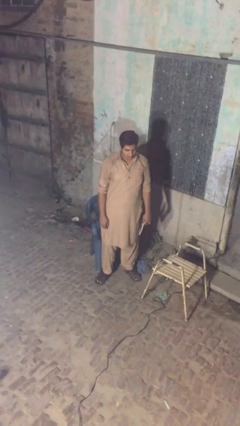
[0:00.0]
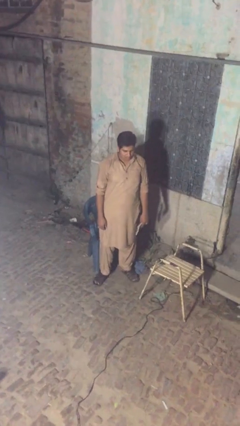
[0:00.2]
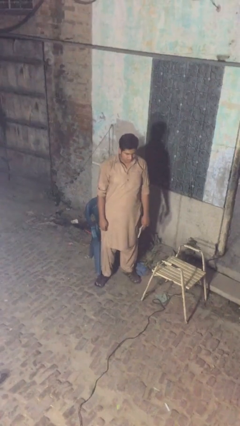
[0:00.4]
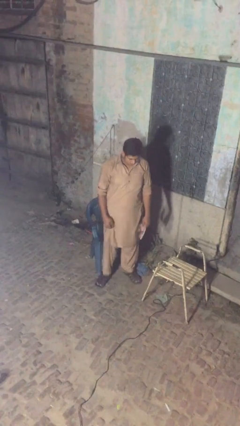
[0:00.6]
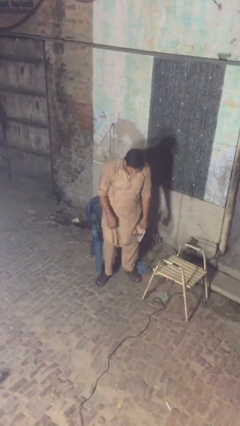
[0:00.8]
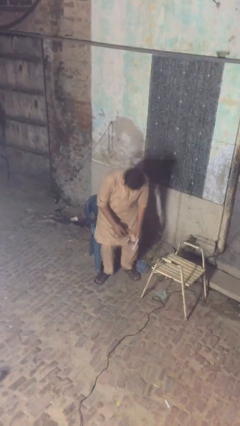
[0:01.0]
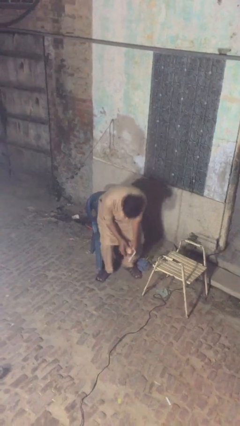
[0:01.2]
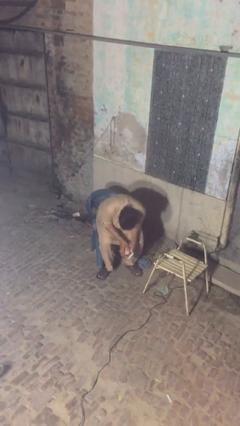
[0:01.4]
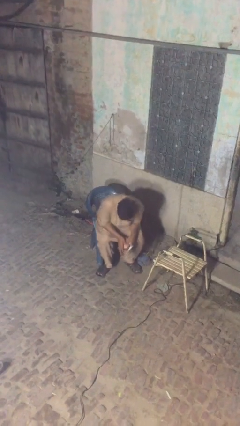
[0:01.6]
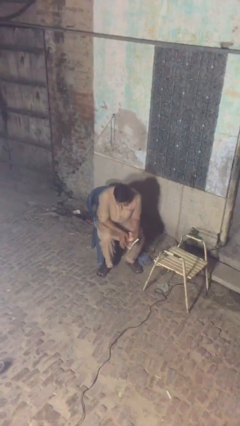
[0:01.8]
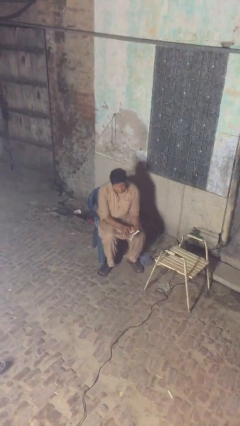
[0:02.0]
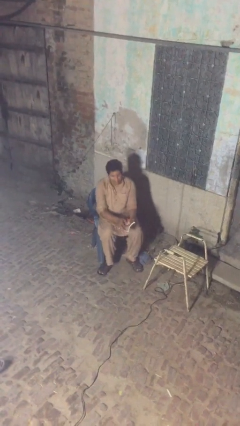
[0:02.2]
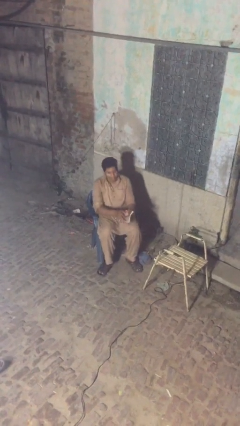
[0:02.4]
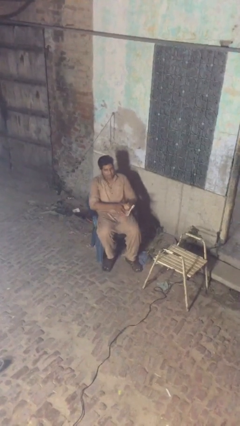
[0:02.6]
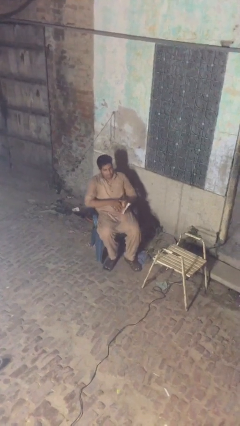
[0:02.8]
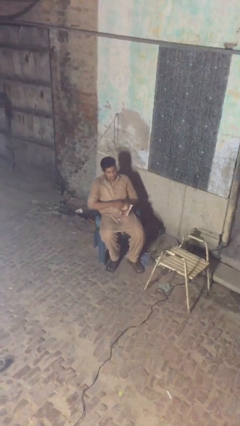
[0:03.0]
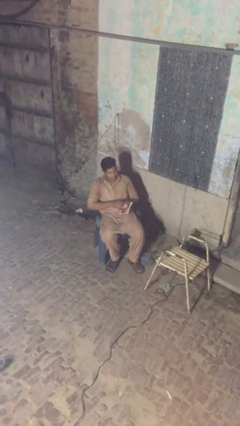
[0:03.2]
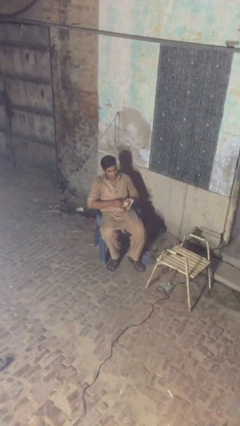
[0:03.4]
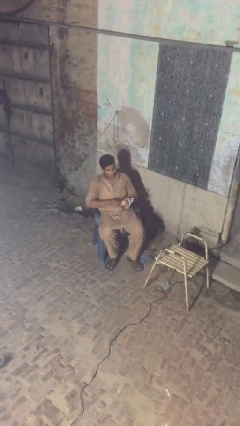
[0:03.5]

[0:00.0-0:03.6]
person sits down

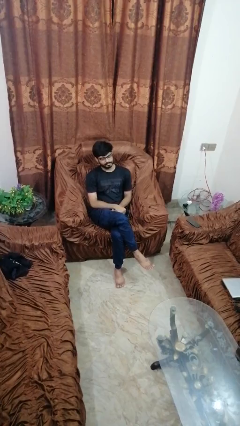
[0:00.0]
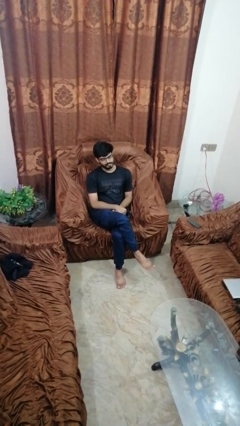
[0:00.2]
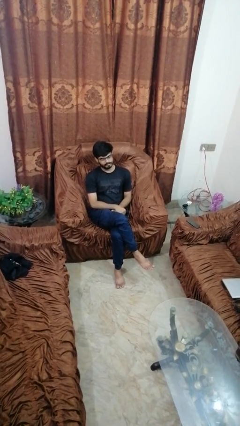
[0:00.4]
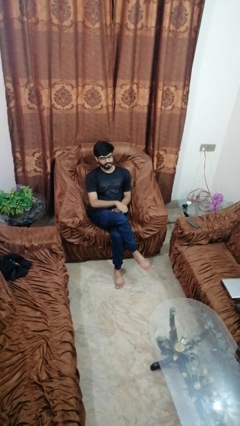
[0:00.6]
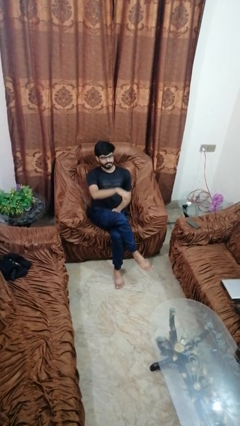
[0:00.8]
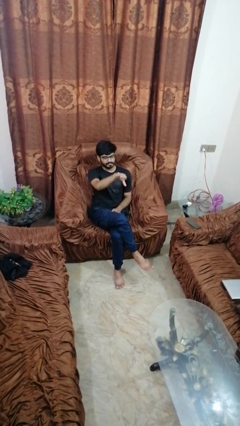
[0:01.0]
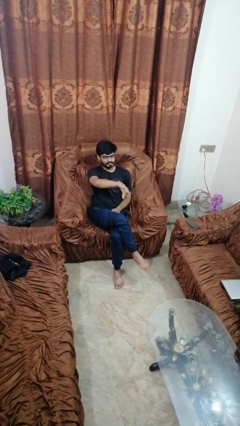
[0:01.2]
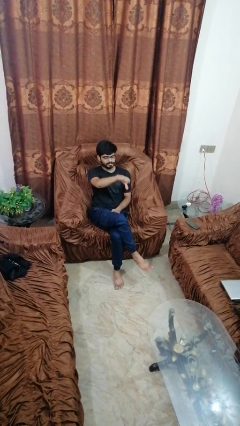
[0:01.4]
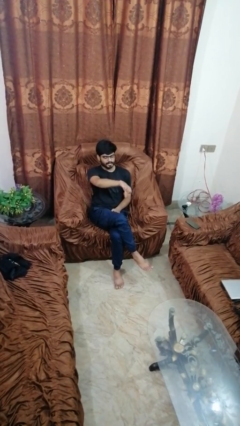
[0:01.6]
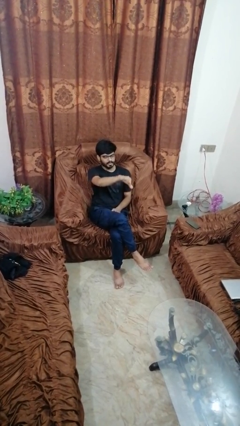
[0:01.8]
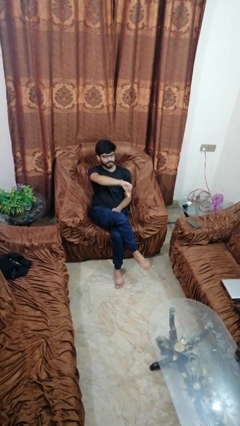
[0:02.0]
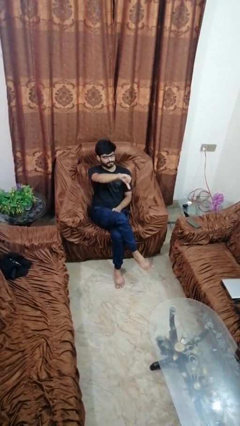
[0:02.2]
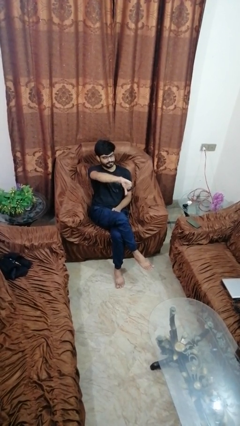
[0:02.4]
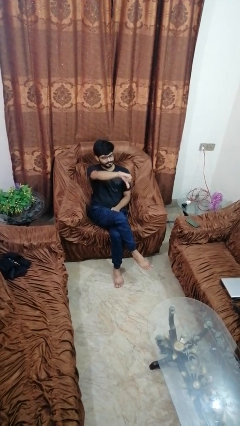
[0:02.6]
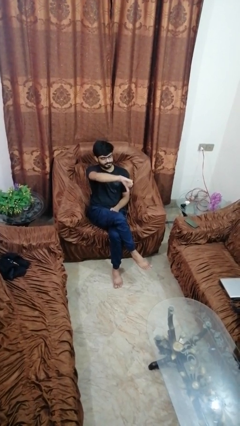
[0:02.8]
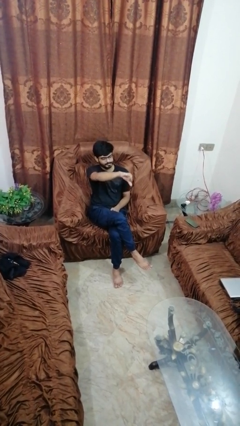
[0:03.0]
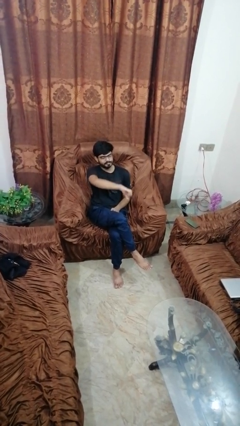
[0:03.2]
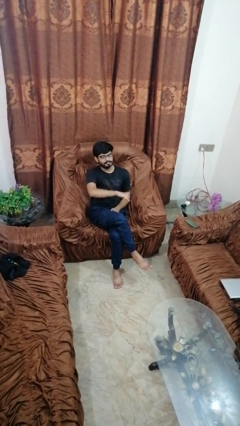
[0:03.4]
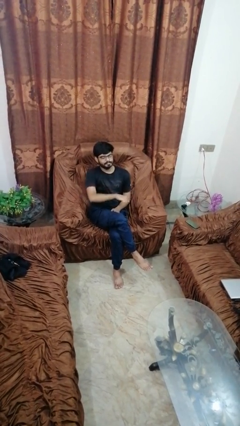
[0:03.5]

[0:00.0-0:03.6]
person gestures thumbs down

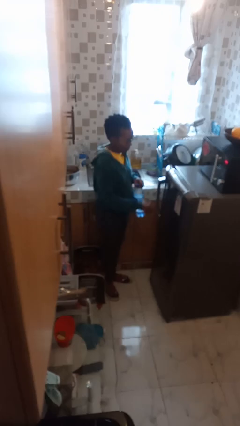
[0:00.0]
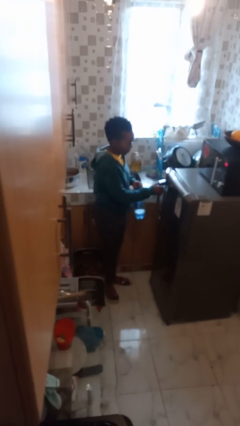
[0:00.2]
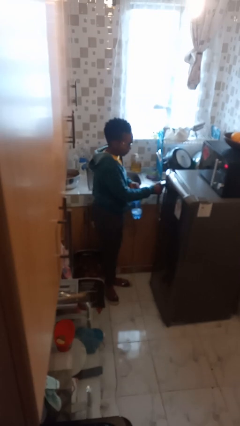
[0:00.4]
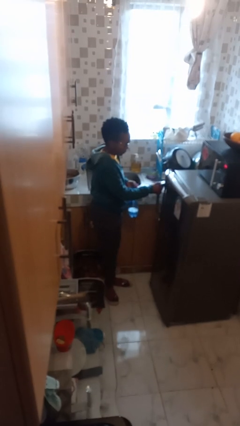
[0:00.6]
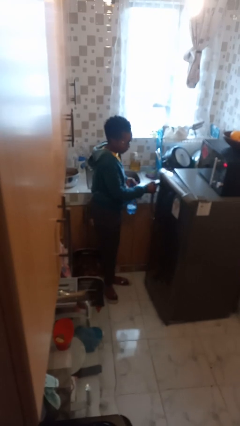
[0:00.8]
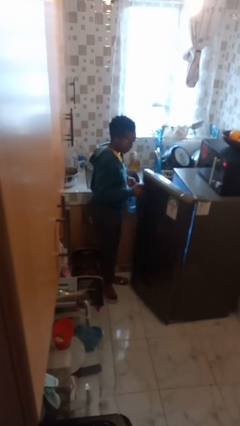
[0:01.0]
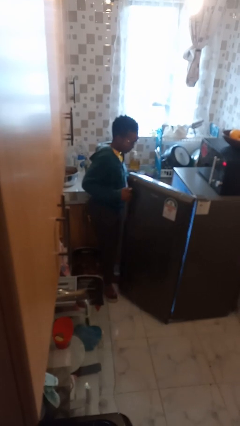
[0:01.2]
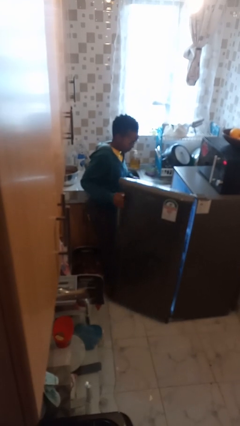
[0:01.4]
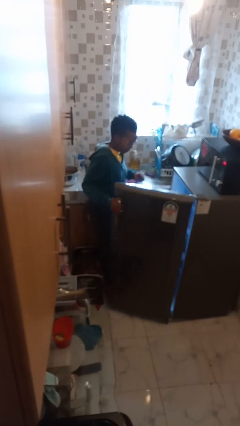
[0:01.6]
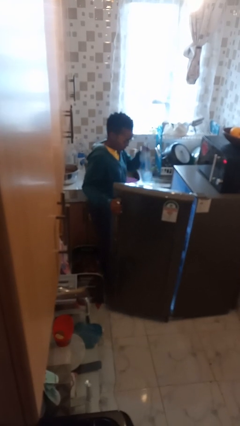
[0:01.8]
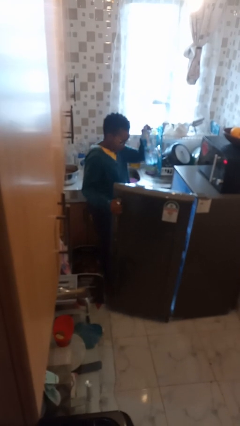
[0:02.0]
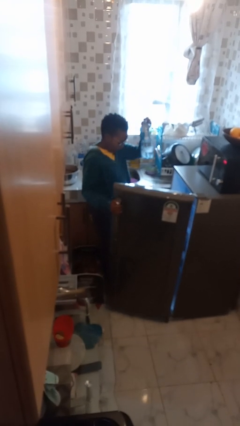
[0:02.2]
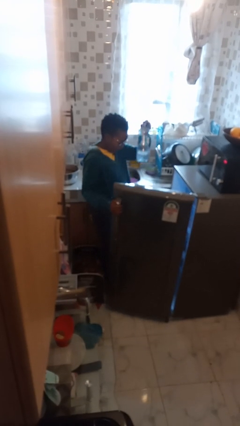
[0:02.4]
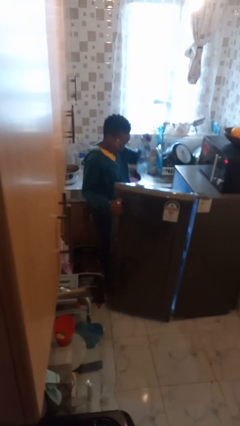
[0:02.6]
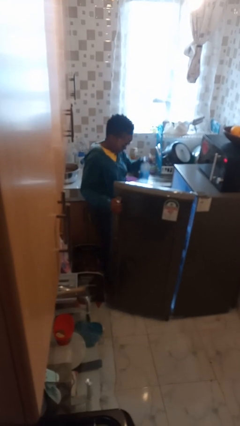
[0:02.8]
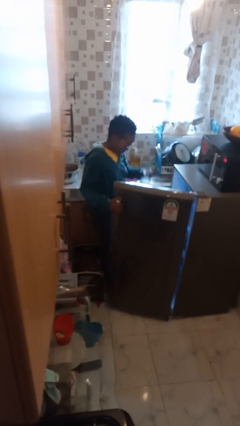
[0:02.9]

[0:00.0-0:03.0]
person opens refrigerator

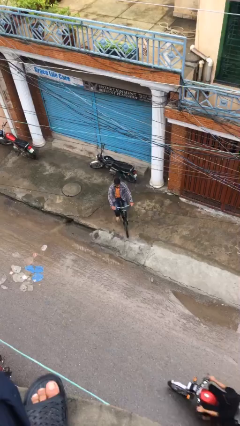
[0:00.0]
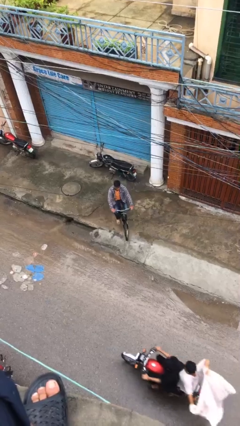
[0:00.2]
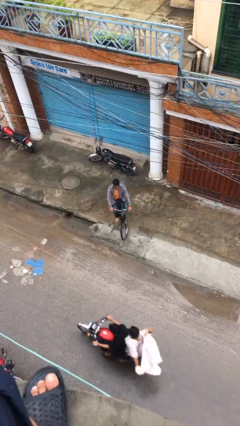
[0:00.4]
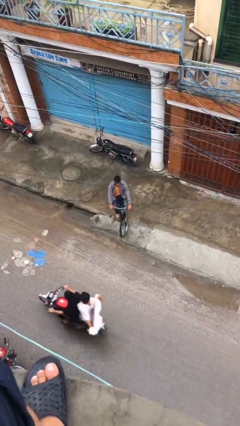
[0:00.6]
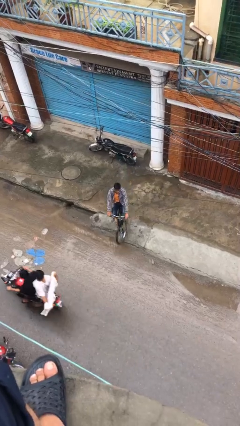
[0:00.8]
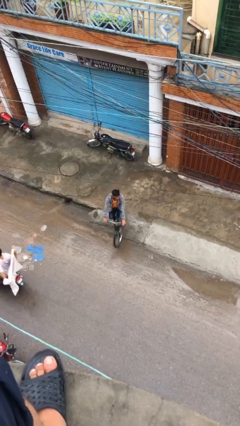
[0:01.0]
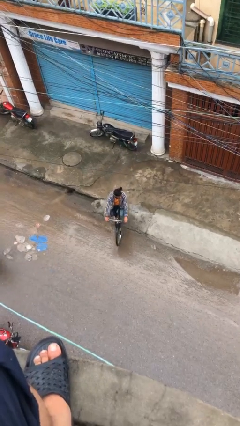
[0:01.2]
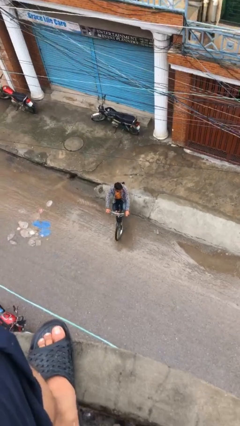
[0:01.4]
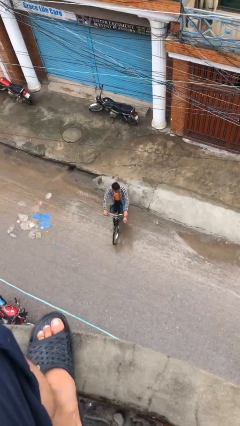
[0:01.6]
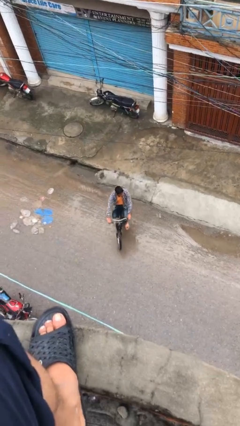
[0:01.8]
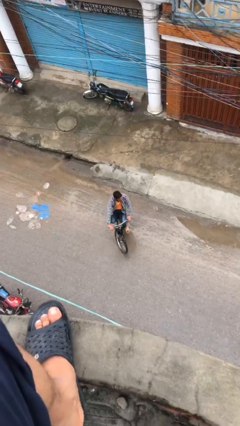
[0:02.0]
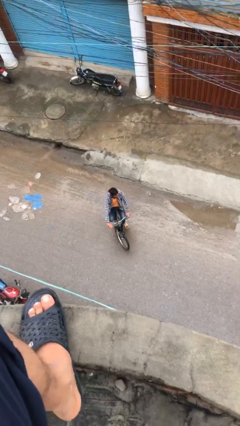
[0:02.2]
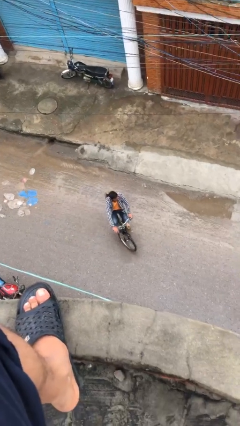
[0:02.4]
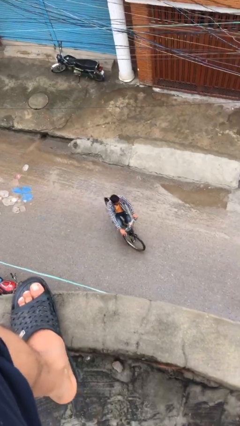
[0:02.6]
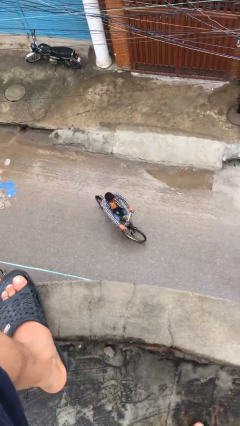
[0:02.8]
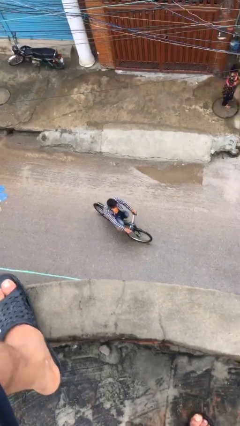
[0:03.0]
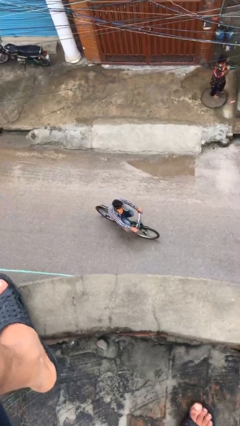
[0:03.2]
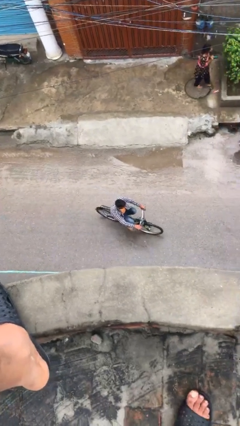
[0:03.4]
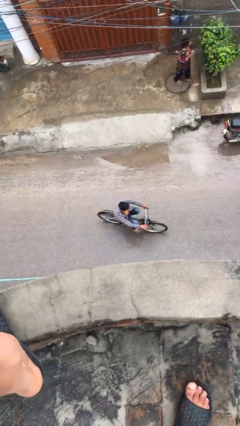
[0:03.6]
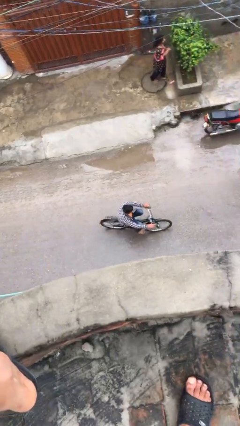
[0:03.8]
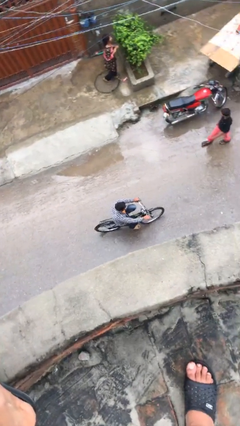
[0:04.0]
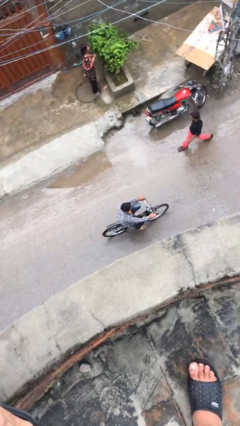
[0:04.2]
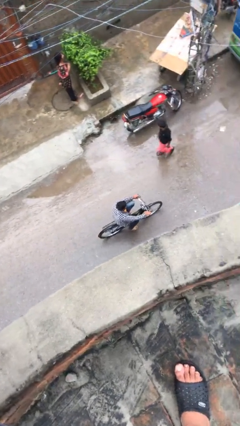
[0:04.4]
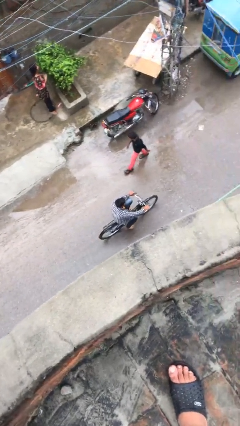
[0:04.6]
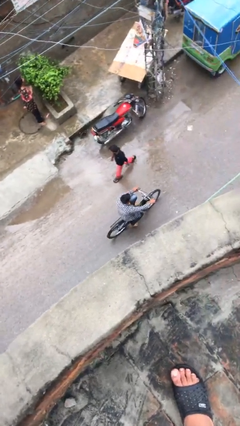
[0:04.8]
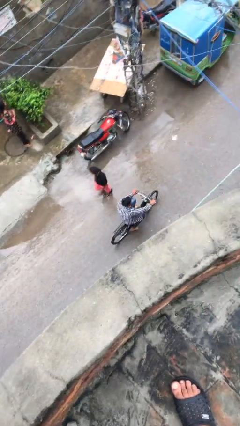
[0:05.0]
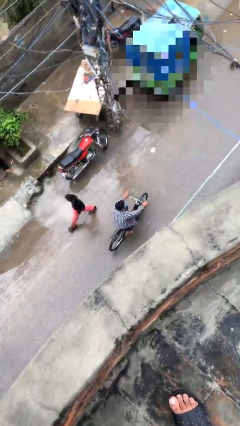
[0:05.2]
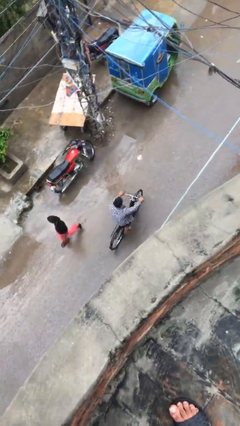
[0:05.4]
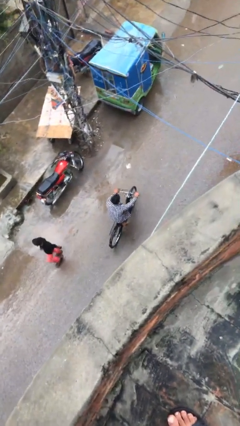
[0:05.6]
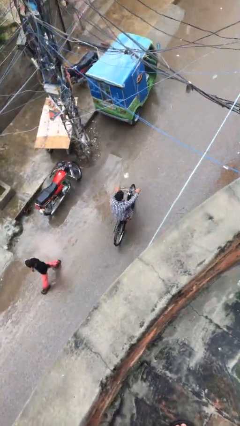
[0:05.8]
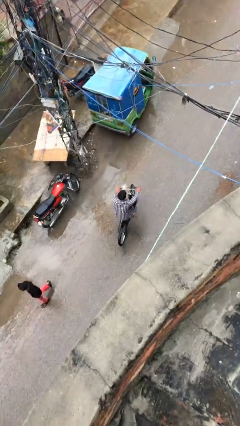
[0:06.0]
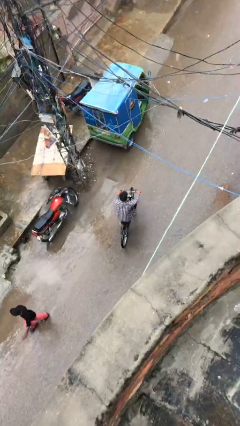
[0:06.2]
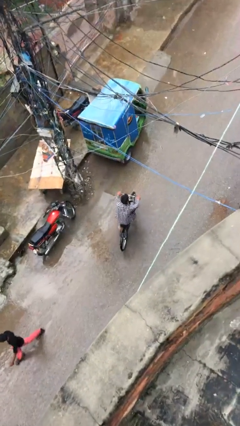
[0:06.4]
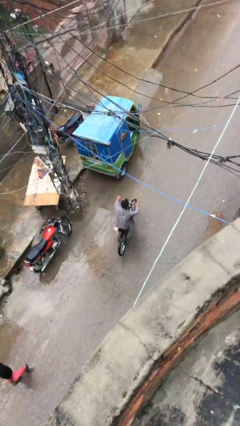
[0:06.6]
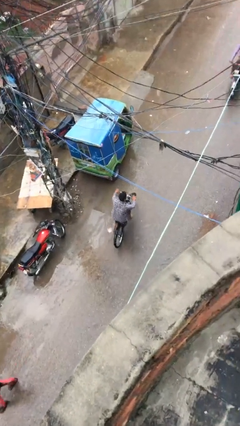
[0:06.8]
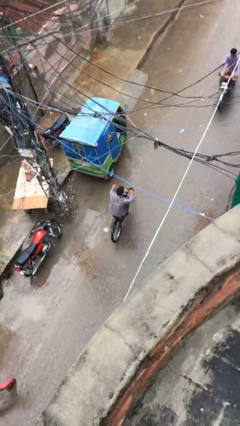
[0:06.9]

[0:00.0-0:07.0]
person rides bicycle

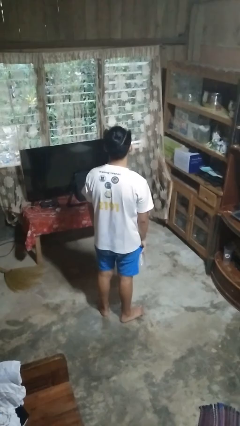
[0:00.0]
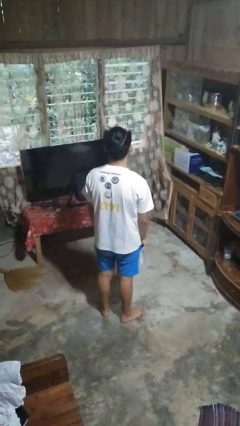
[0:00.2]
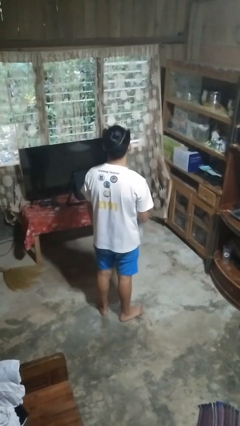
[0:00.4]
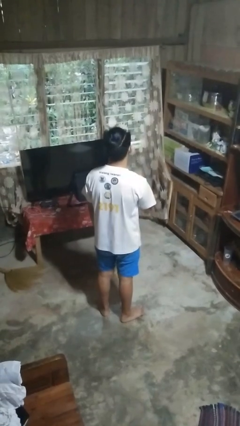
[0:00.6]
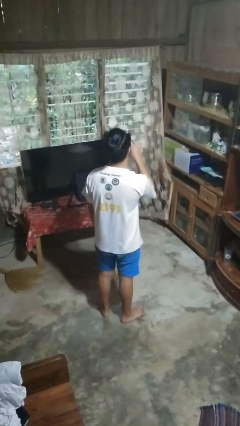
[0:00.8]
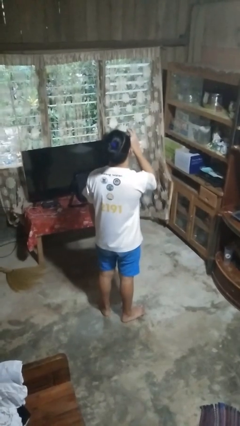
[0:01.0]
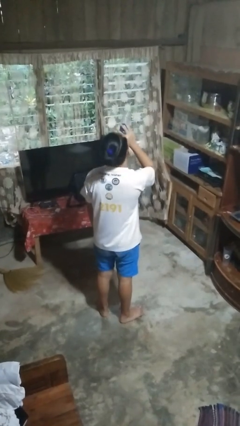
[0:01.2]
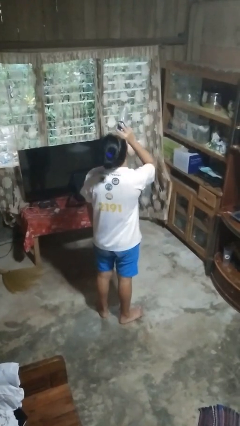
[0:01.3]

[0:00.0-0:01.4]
person drinks from bottle
